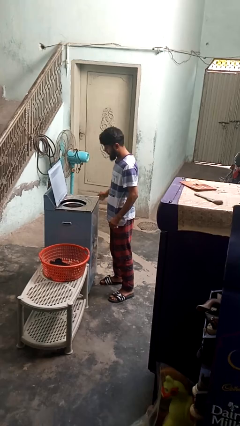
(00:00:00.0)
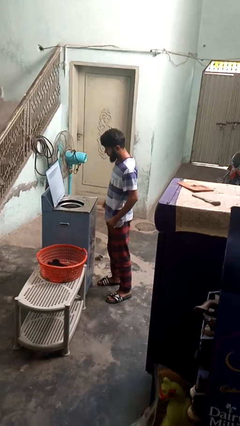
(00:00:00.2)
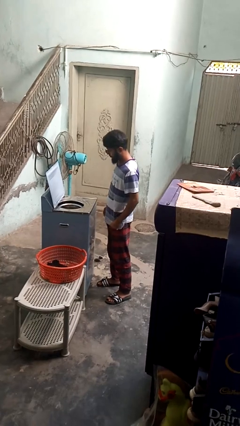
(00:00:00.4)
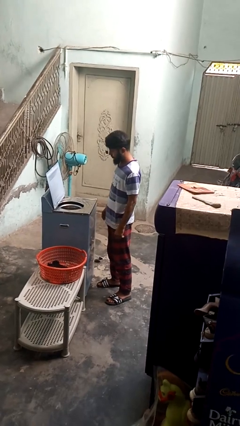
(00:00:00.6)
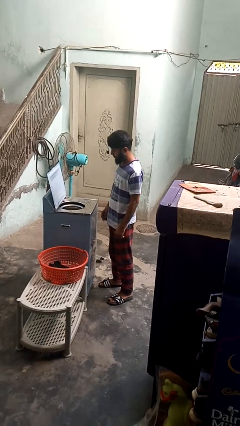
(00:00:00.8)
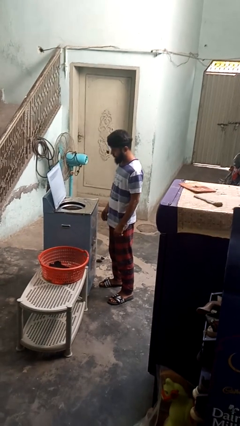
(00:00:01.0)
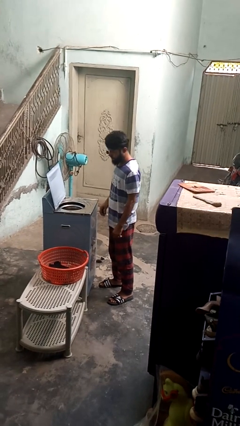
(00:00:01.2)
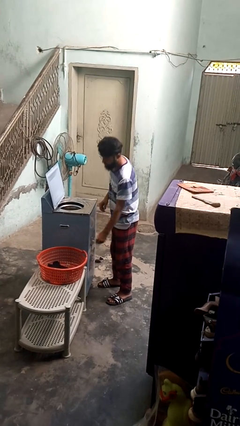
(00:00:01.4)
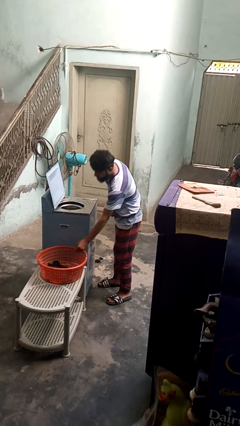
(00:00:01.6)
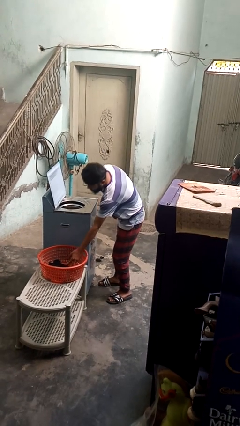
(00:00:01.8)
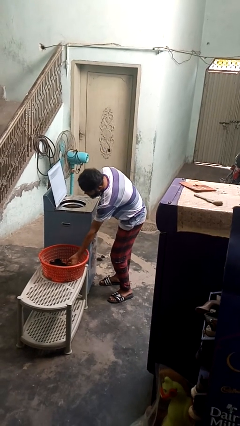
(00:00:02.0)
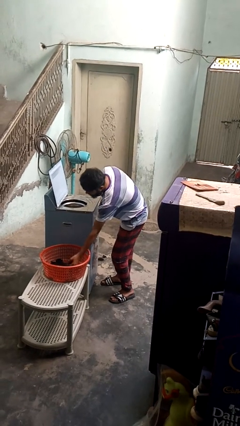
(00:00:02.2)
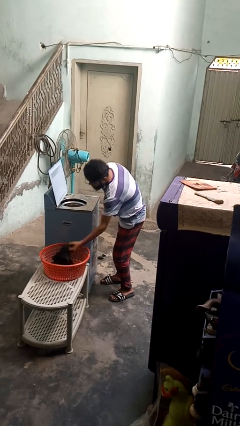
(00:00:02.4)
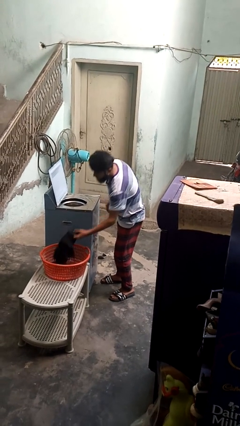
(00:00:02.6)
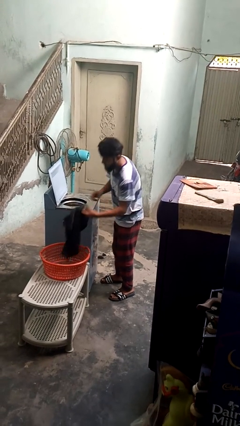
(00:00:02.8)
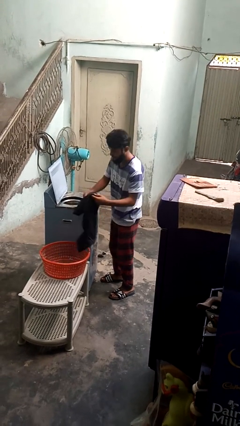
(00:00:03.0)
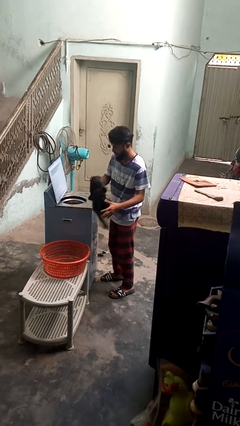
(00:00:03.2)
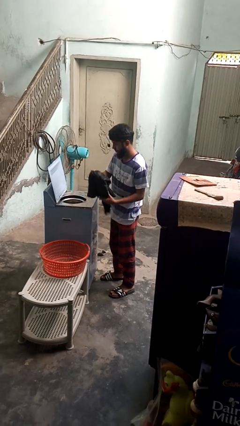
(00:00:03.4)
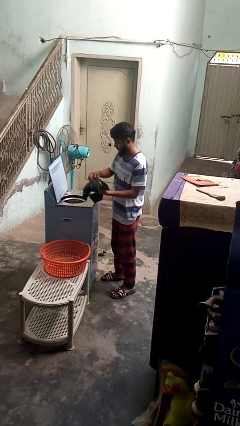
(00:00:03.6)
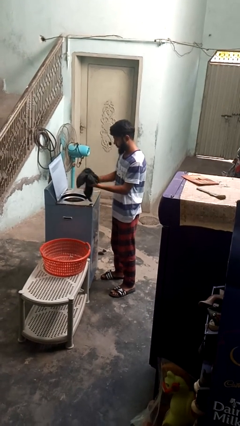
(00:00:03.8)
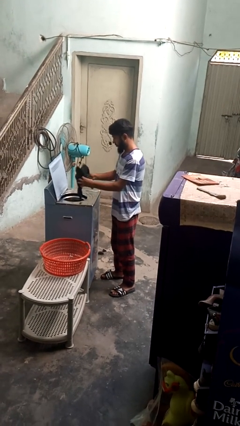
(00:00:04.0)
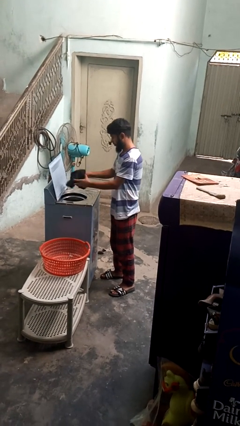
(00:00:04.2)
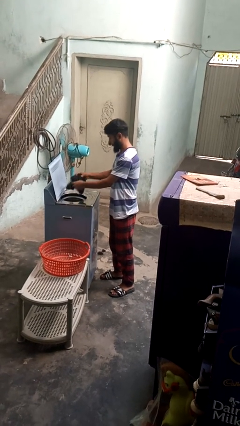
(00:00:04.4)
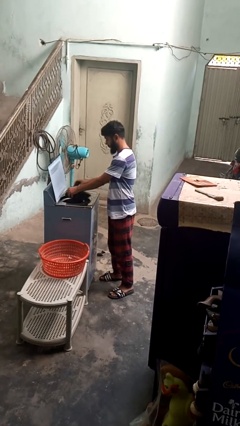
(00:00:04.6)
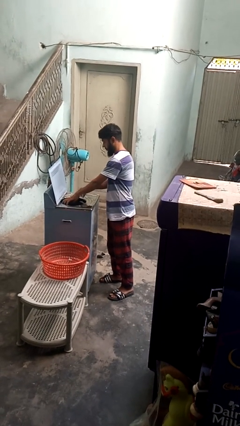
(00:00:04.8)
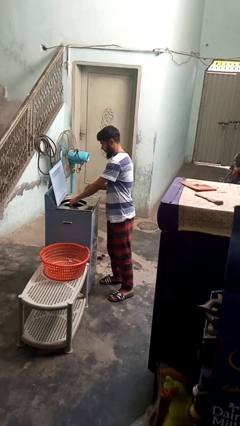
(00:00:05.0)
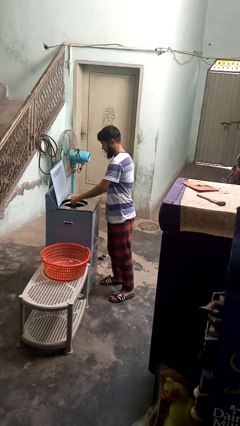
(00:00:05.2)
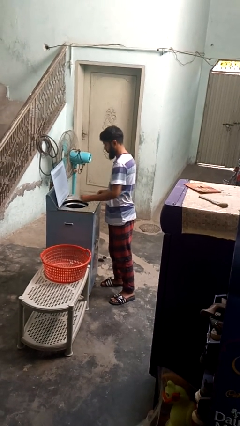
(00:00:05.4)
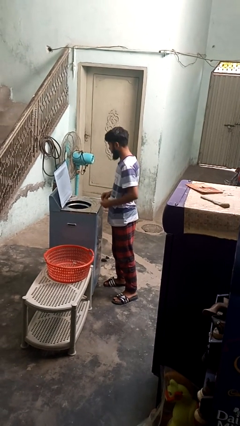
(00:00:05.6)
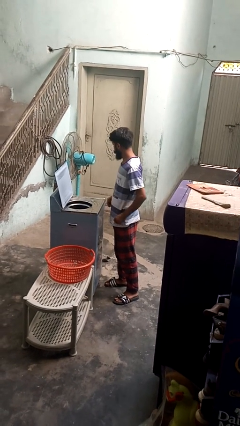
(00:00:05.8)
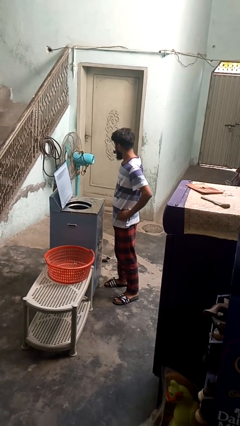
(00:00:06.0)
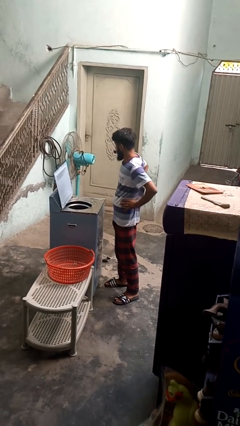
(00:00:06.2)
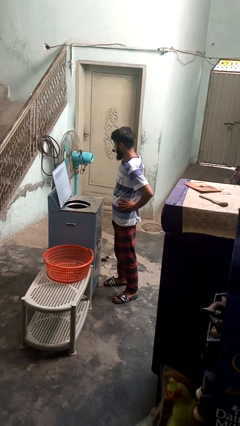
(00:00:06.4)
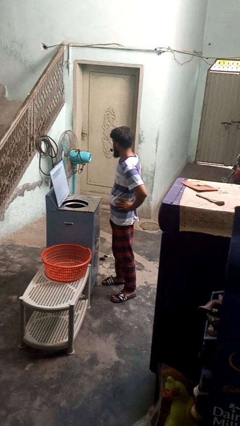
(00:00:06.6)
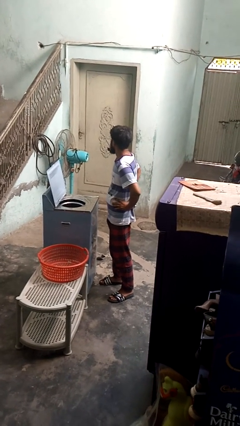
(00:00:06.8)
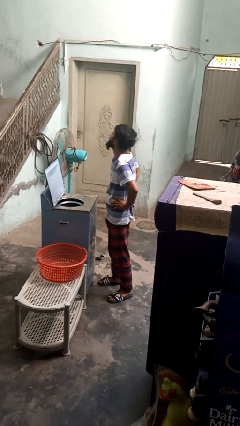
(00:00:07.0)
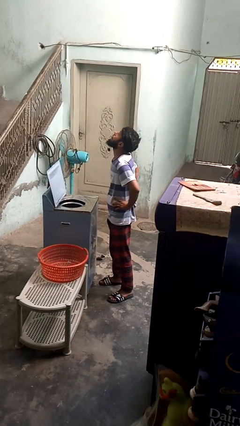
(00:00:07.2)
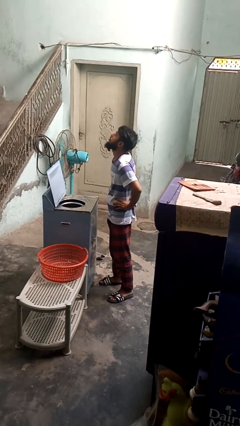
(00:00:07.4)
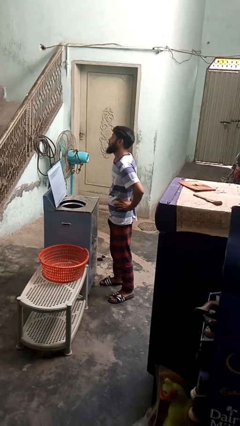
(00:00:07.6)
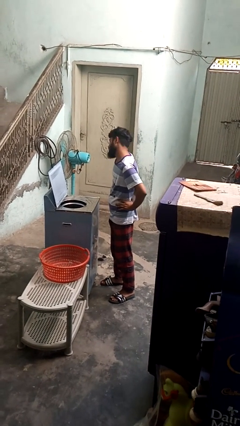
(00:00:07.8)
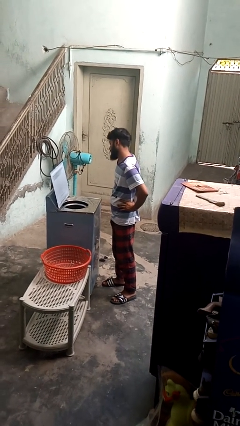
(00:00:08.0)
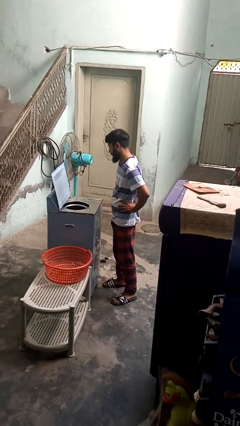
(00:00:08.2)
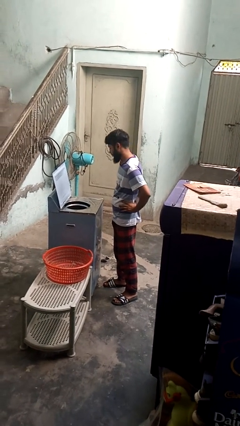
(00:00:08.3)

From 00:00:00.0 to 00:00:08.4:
person loads clotheswasher

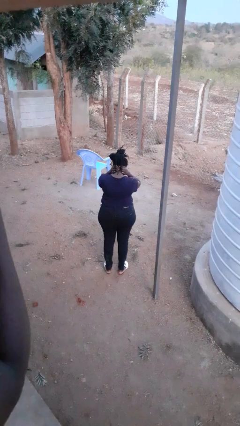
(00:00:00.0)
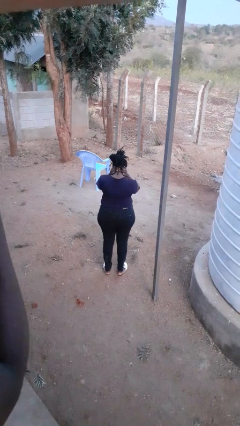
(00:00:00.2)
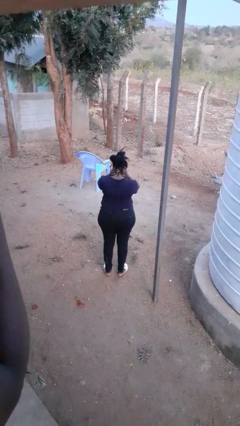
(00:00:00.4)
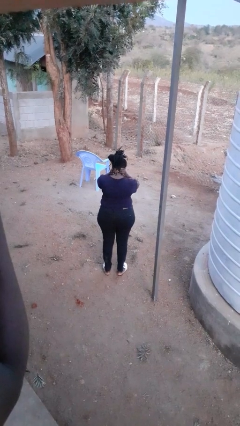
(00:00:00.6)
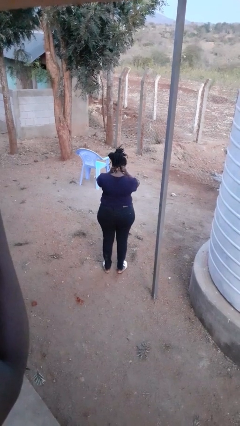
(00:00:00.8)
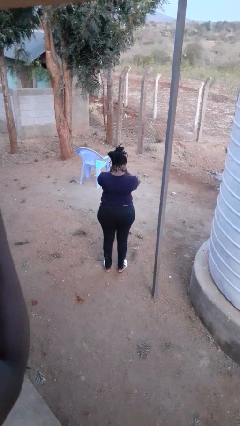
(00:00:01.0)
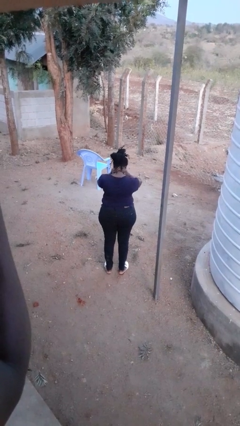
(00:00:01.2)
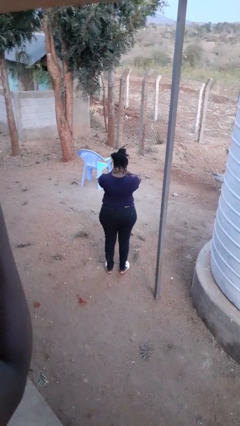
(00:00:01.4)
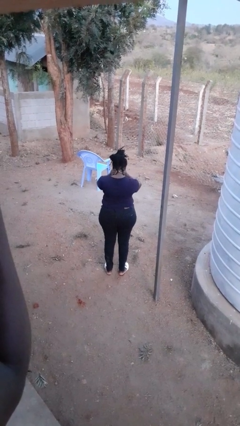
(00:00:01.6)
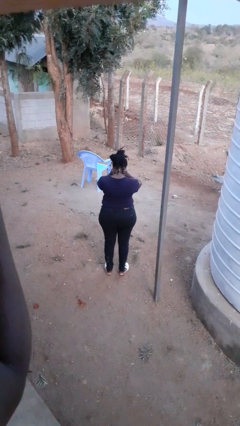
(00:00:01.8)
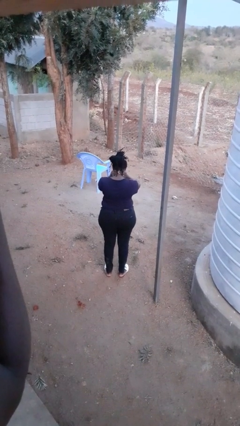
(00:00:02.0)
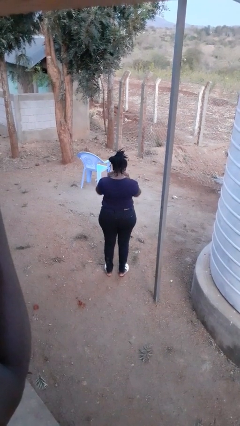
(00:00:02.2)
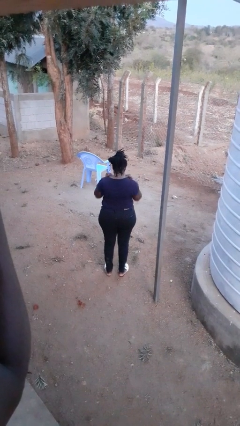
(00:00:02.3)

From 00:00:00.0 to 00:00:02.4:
person rubs neck

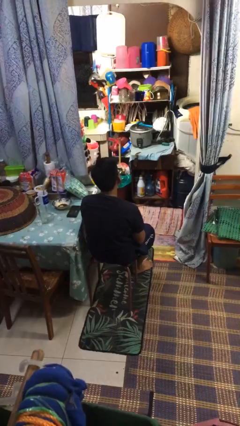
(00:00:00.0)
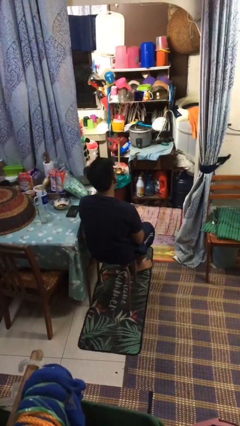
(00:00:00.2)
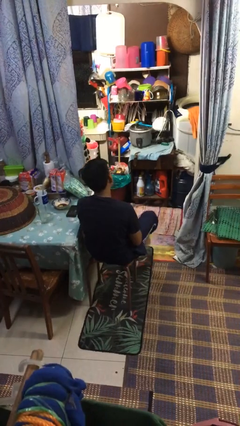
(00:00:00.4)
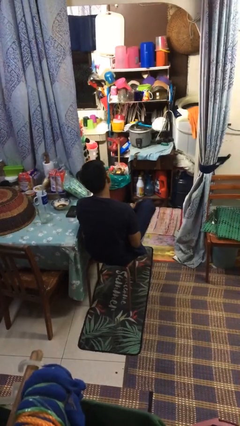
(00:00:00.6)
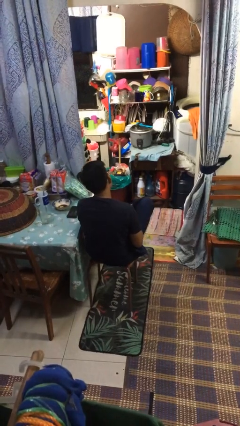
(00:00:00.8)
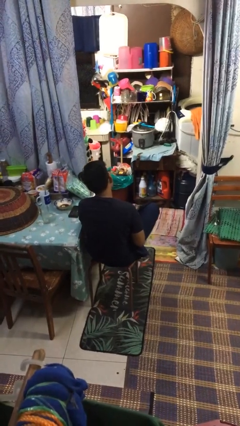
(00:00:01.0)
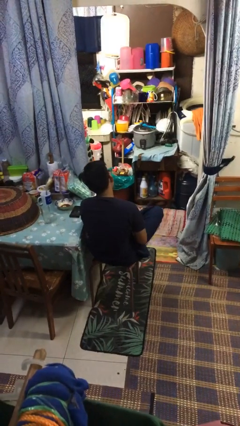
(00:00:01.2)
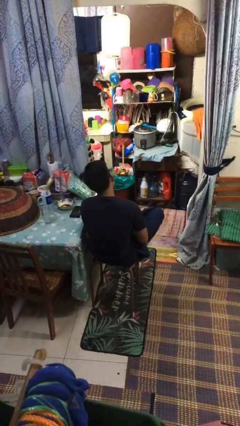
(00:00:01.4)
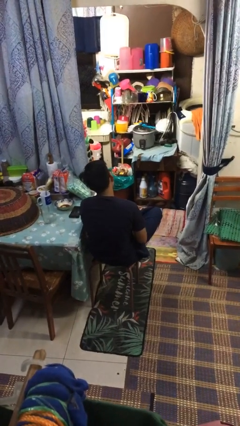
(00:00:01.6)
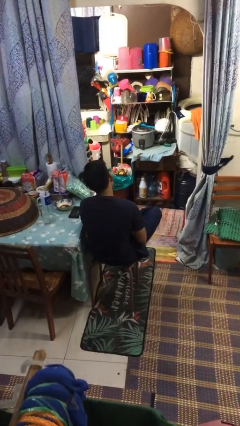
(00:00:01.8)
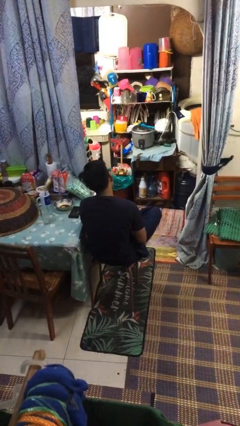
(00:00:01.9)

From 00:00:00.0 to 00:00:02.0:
person crosses legs

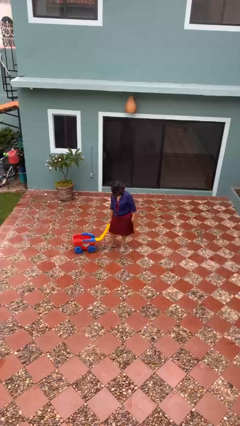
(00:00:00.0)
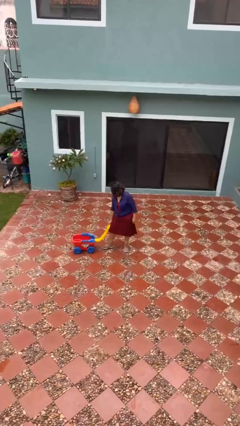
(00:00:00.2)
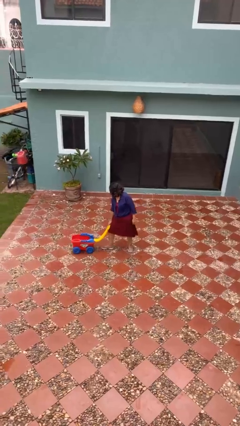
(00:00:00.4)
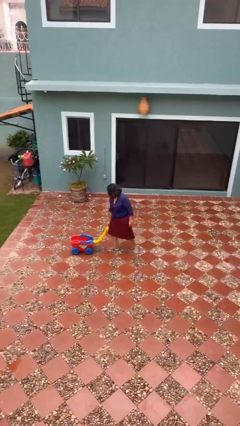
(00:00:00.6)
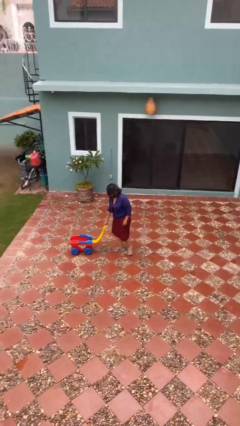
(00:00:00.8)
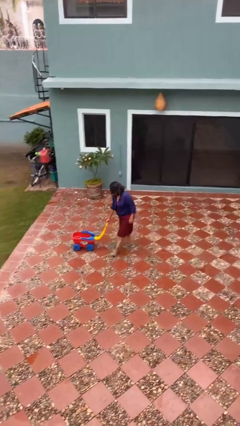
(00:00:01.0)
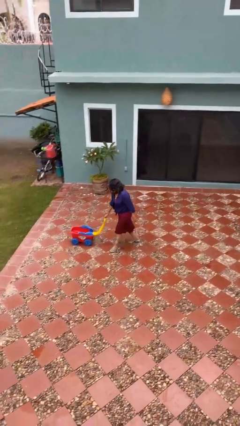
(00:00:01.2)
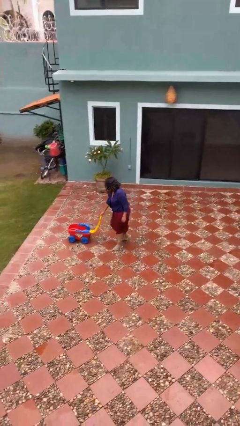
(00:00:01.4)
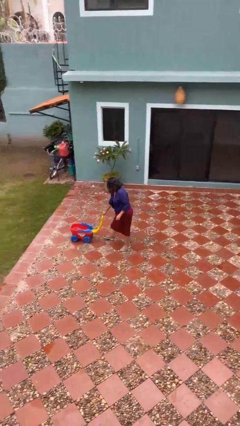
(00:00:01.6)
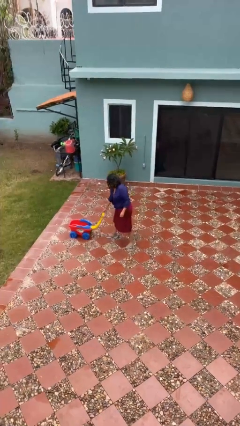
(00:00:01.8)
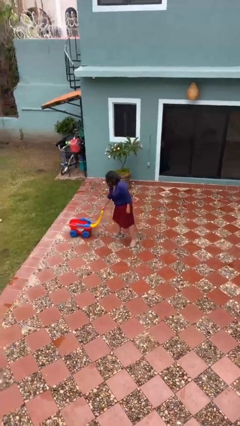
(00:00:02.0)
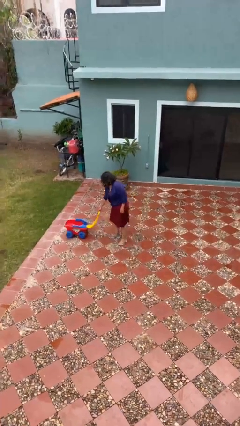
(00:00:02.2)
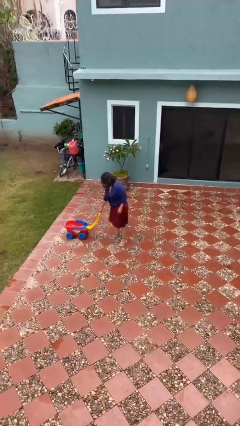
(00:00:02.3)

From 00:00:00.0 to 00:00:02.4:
person pushes wheeled cart

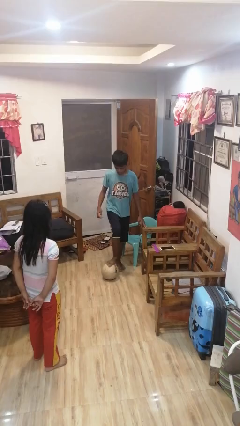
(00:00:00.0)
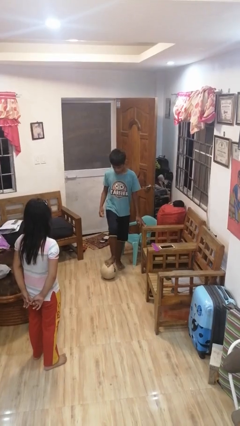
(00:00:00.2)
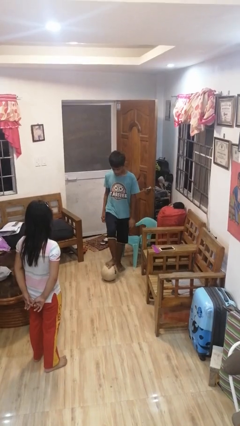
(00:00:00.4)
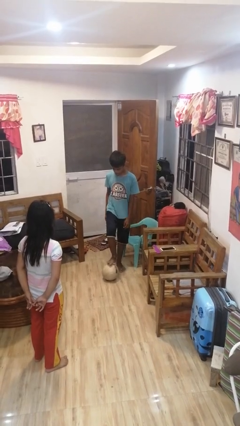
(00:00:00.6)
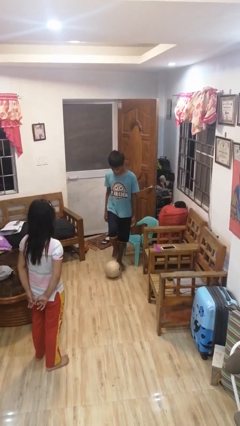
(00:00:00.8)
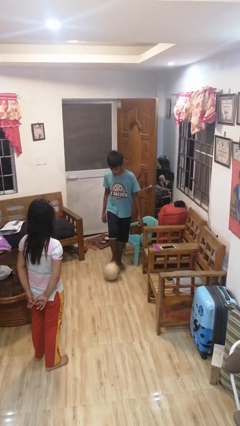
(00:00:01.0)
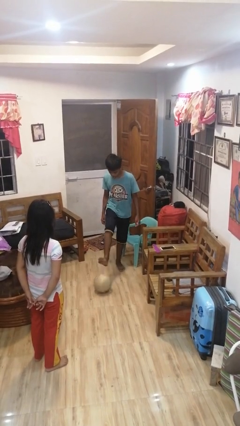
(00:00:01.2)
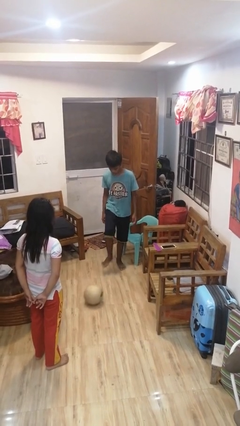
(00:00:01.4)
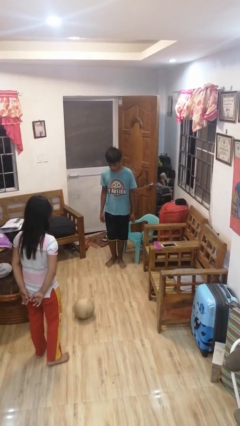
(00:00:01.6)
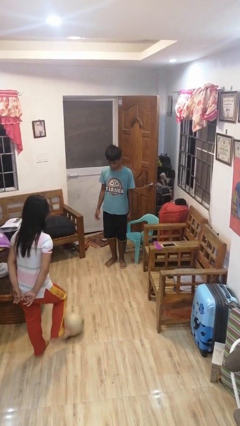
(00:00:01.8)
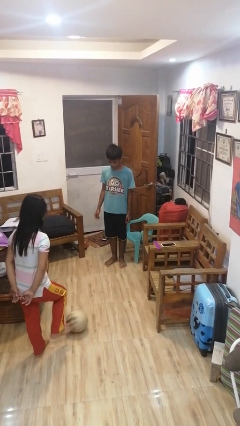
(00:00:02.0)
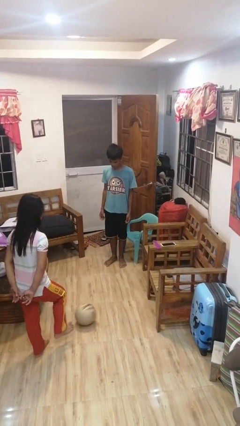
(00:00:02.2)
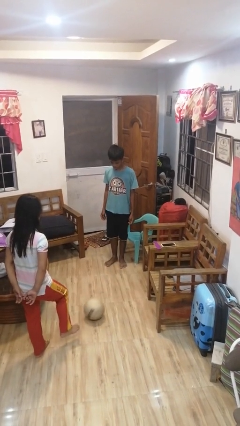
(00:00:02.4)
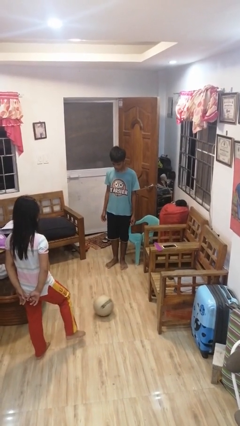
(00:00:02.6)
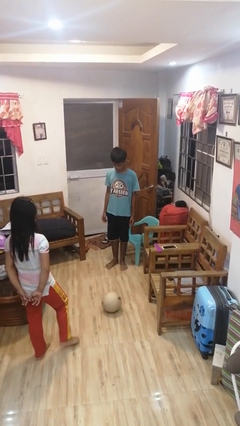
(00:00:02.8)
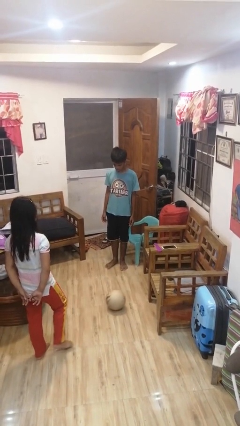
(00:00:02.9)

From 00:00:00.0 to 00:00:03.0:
person kicks object to person
